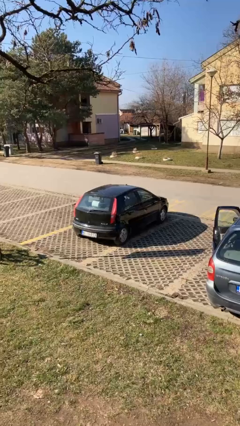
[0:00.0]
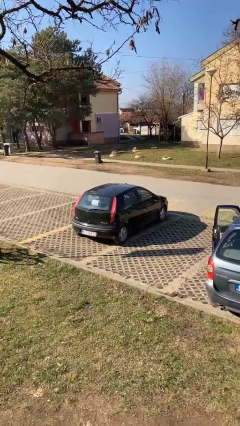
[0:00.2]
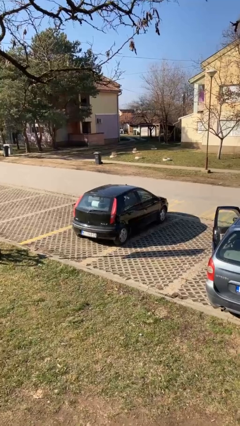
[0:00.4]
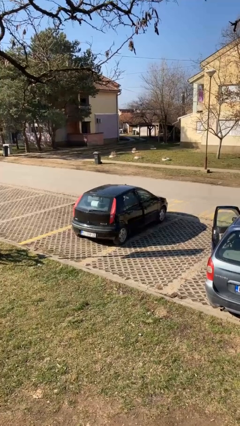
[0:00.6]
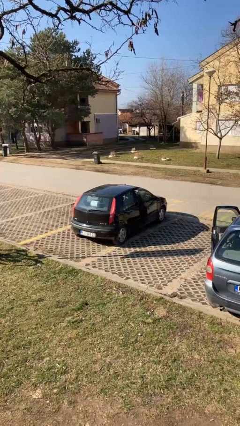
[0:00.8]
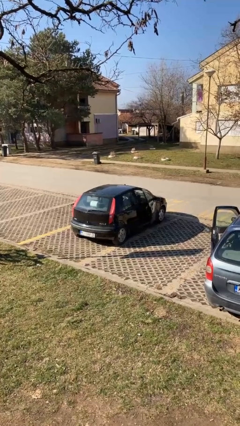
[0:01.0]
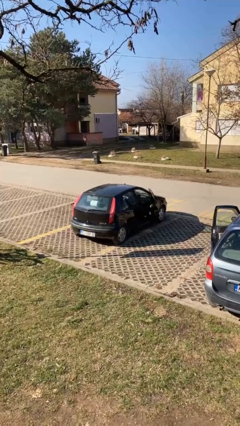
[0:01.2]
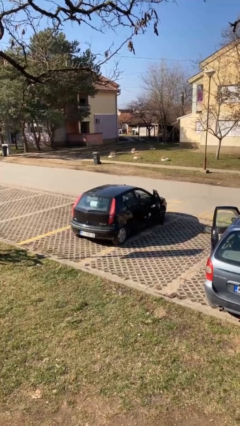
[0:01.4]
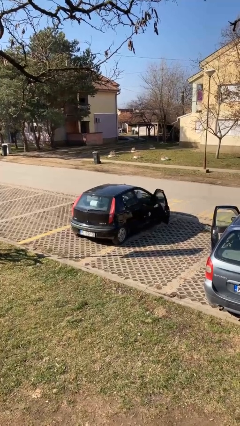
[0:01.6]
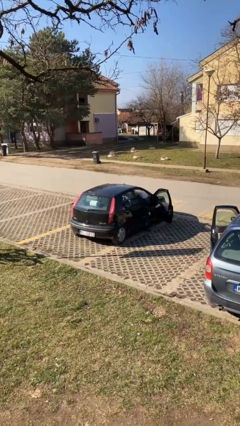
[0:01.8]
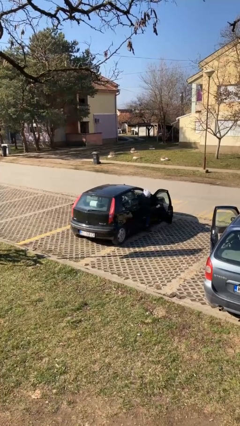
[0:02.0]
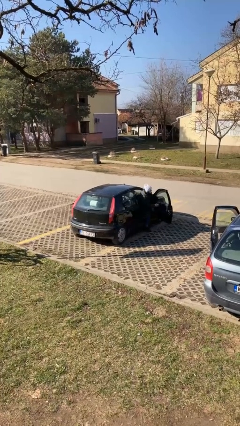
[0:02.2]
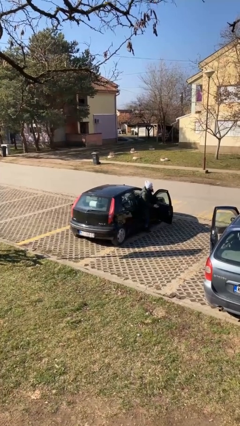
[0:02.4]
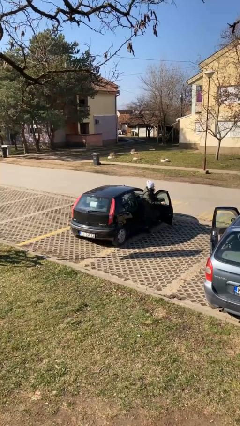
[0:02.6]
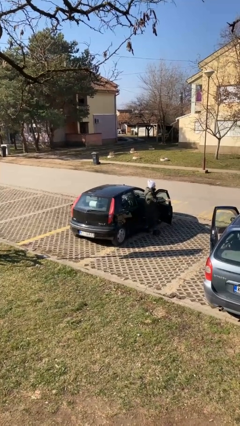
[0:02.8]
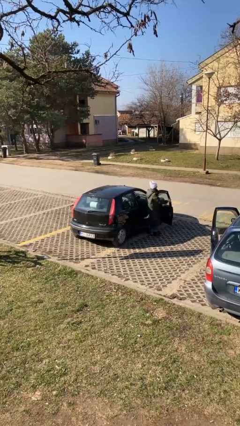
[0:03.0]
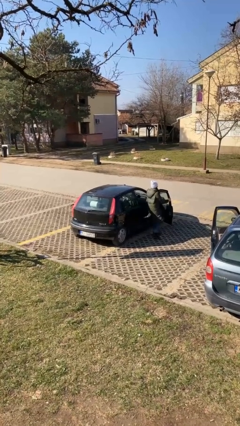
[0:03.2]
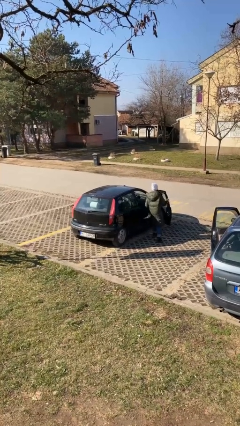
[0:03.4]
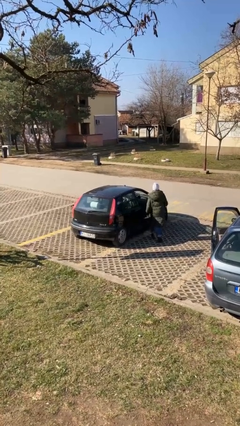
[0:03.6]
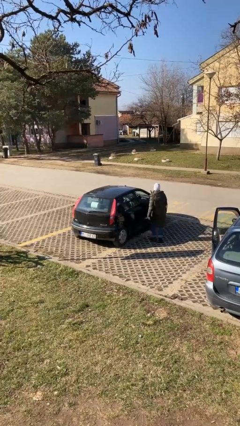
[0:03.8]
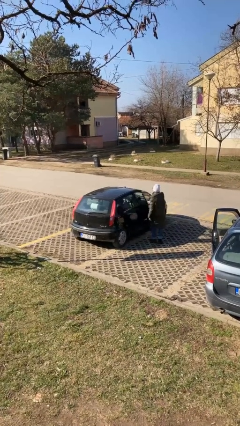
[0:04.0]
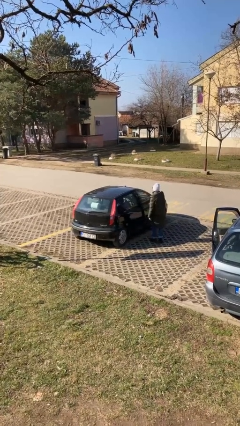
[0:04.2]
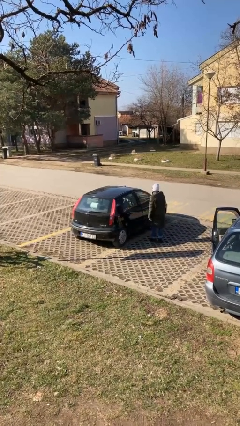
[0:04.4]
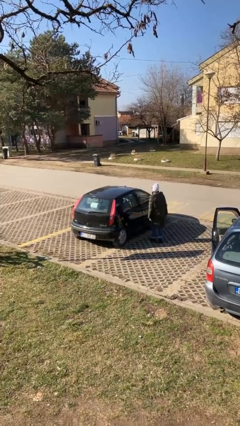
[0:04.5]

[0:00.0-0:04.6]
car drops off person

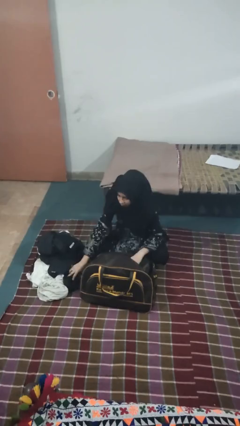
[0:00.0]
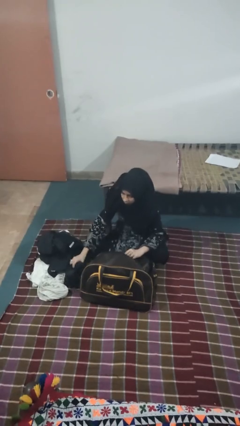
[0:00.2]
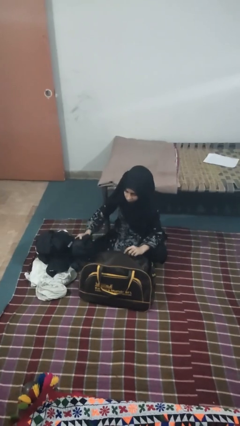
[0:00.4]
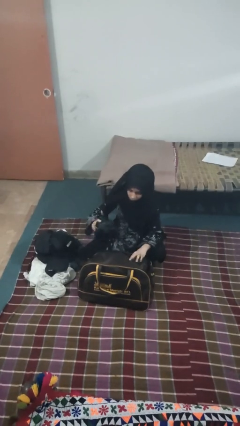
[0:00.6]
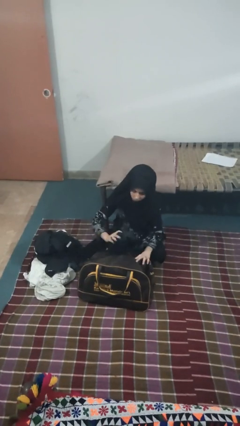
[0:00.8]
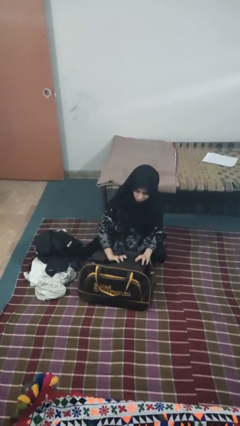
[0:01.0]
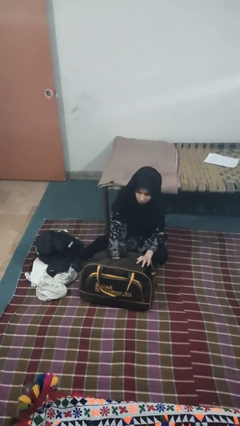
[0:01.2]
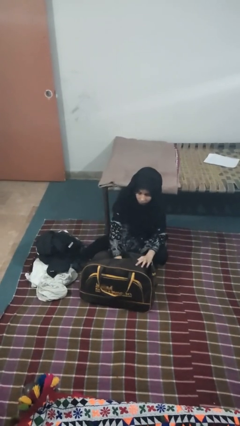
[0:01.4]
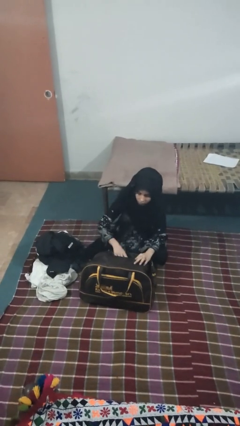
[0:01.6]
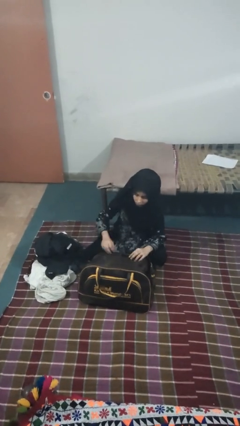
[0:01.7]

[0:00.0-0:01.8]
person loads clothes into suitcase

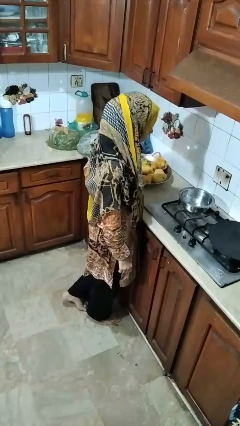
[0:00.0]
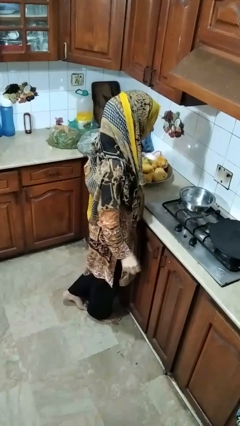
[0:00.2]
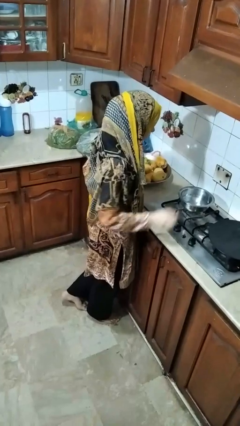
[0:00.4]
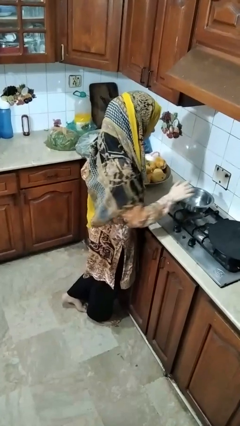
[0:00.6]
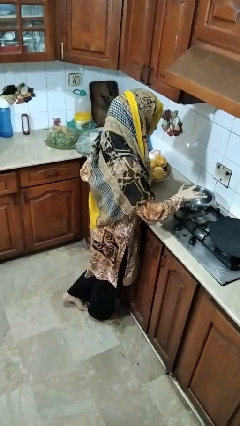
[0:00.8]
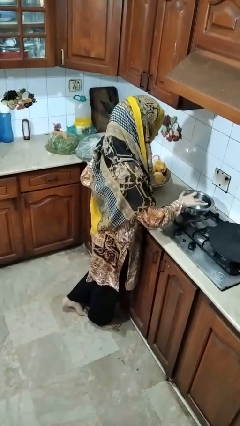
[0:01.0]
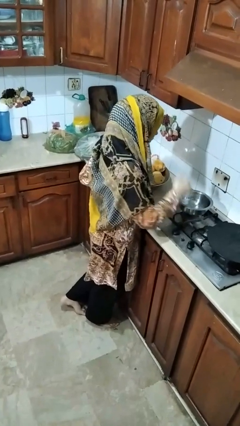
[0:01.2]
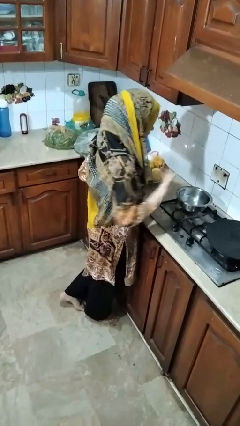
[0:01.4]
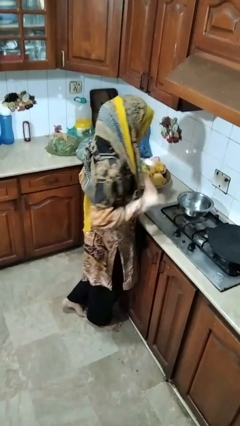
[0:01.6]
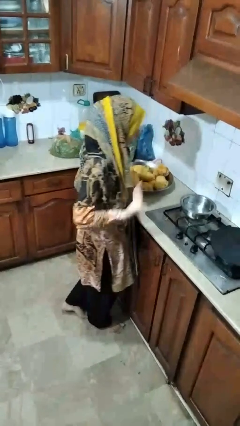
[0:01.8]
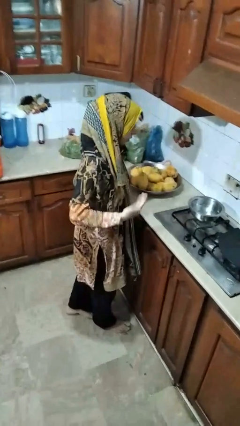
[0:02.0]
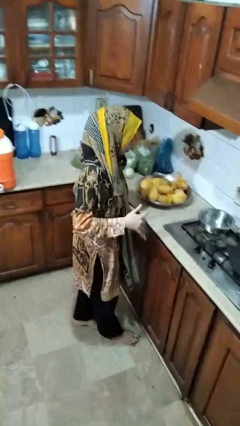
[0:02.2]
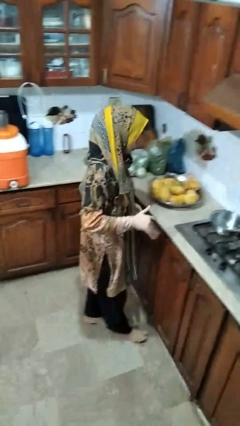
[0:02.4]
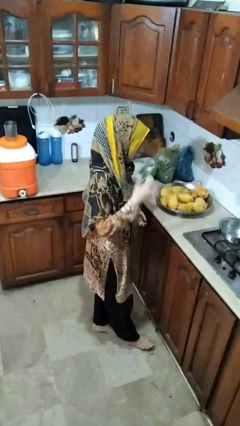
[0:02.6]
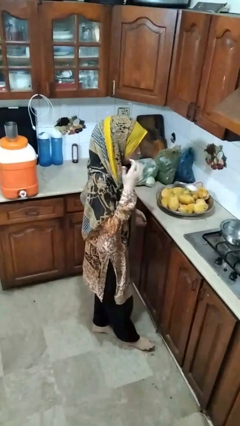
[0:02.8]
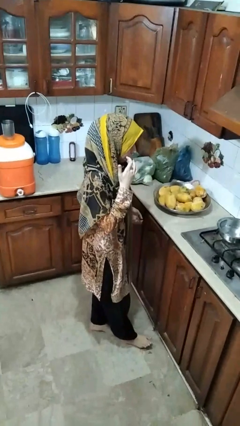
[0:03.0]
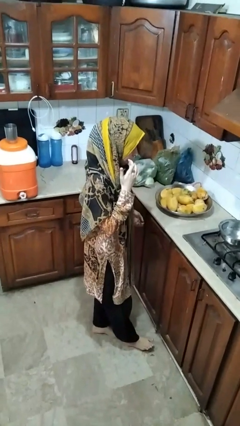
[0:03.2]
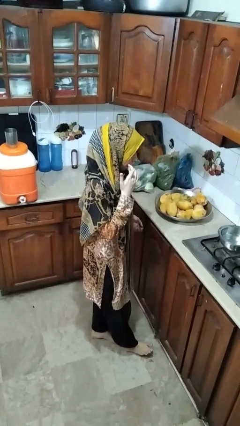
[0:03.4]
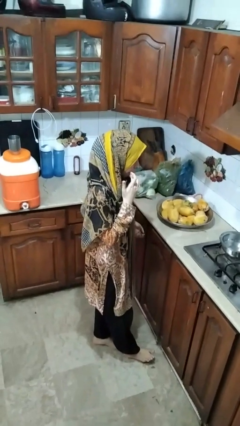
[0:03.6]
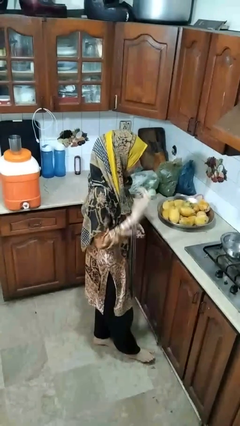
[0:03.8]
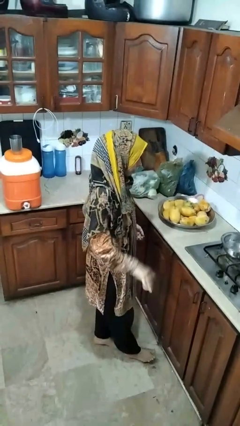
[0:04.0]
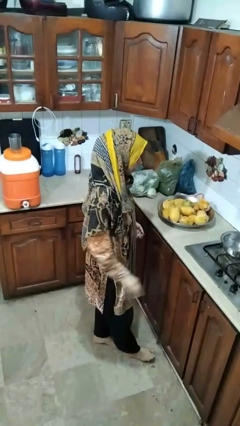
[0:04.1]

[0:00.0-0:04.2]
person burns hand

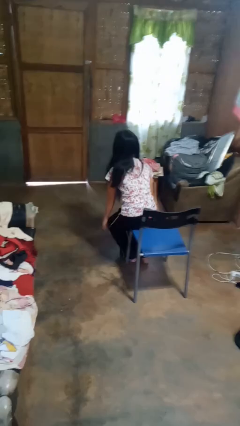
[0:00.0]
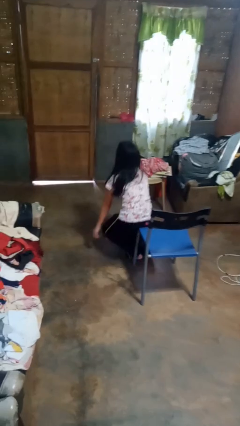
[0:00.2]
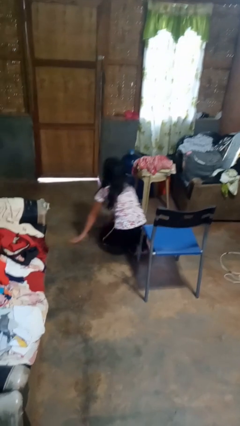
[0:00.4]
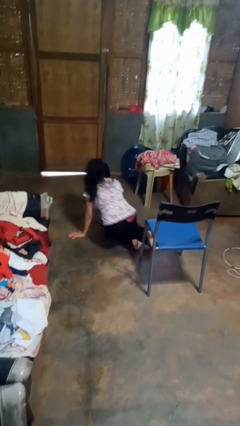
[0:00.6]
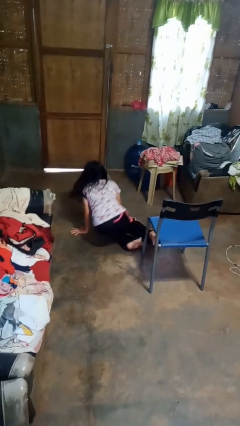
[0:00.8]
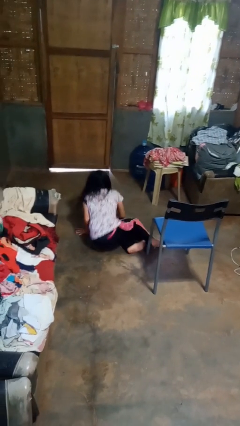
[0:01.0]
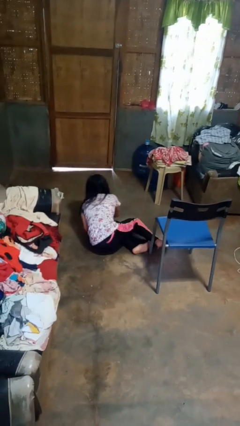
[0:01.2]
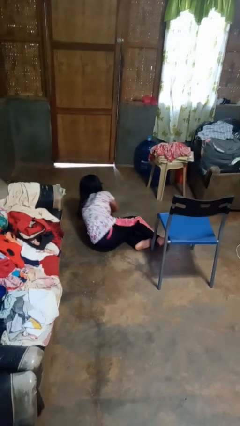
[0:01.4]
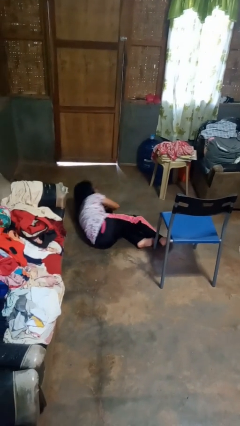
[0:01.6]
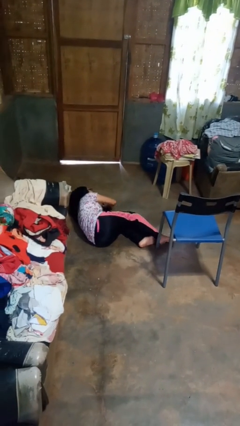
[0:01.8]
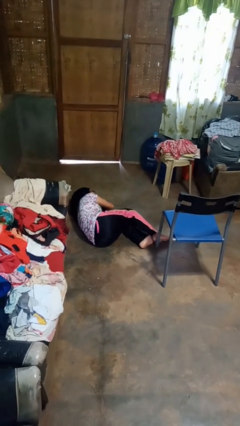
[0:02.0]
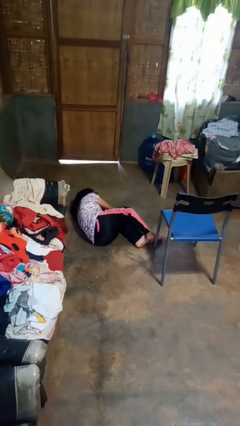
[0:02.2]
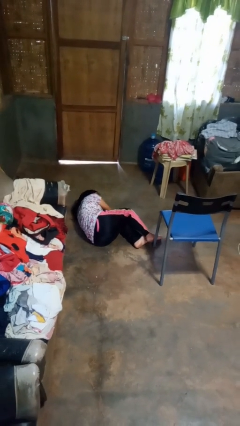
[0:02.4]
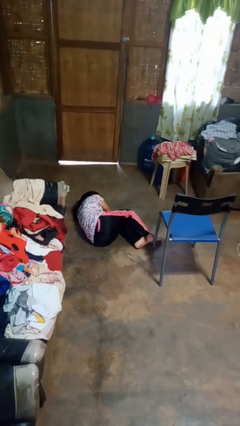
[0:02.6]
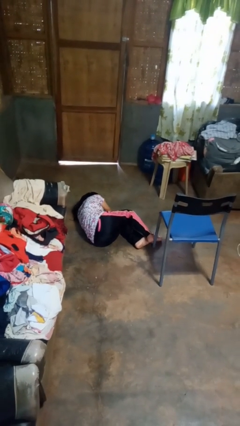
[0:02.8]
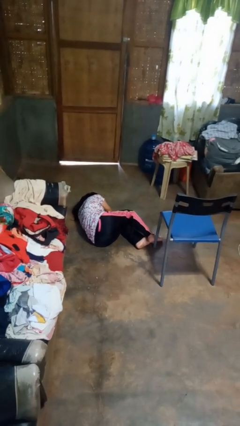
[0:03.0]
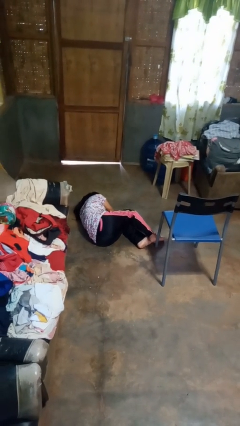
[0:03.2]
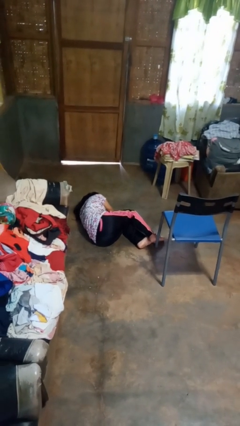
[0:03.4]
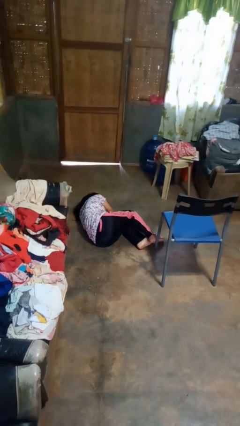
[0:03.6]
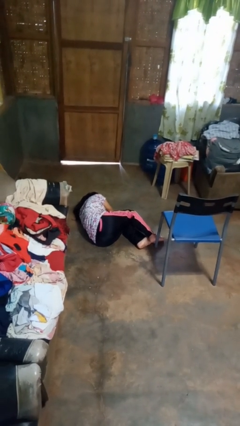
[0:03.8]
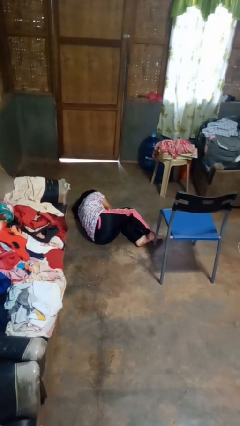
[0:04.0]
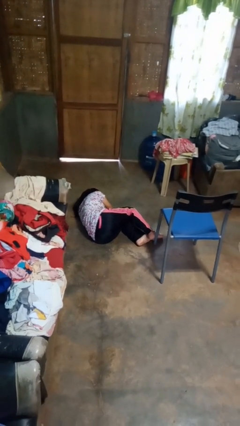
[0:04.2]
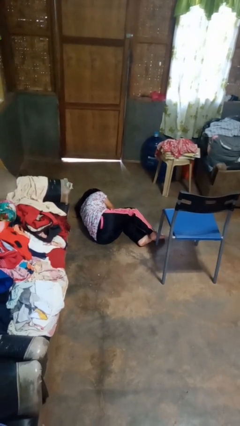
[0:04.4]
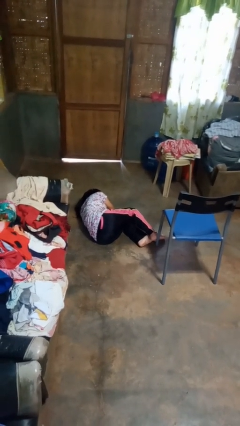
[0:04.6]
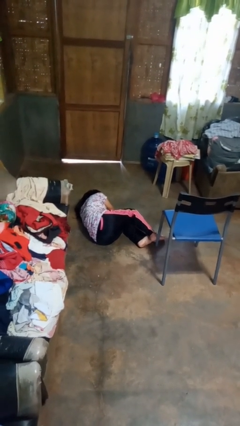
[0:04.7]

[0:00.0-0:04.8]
person falls from chair

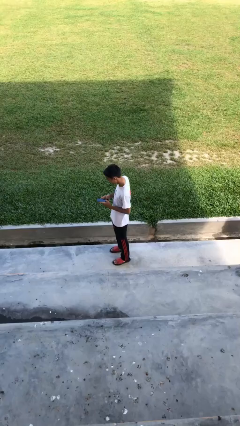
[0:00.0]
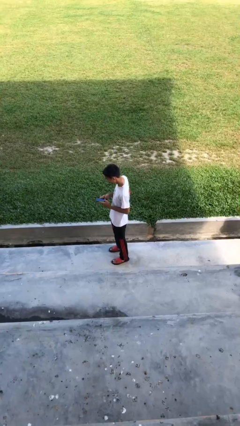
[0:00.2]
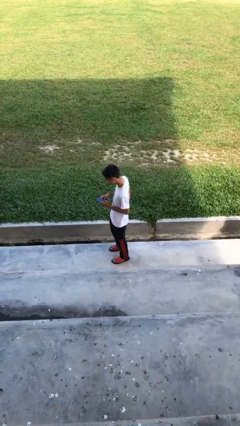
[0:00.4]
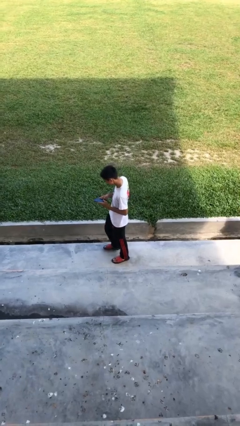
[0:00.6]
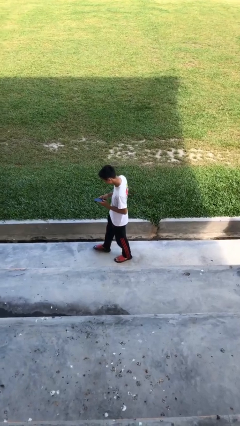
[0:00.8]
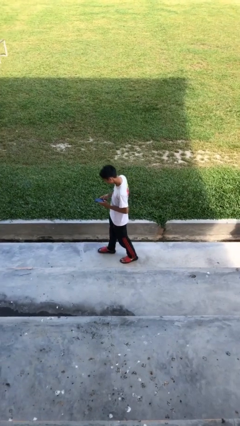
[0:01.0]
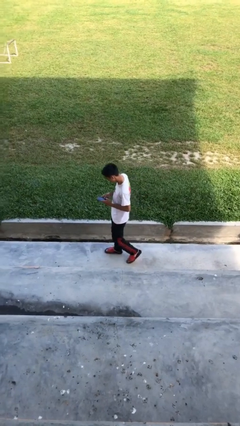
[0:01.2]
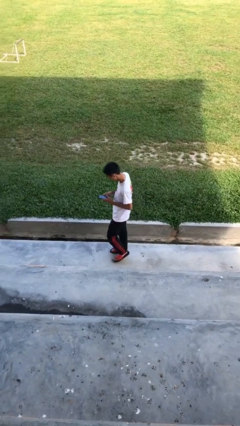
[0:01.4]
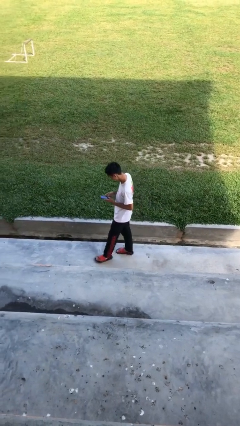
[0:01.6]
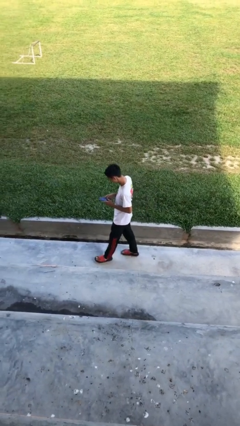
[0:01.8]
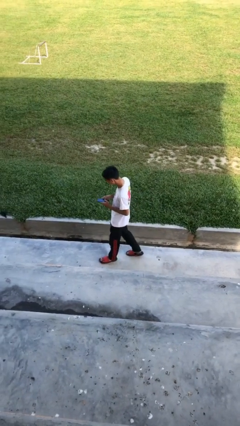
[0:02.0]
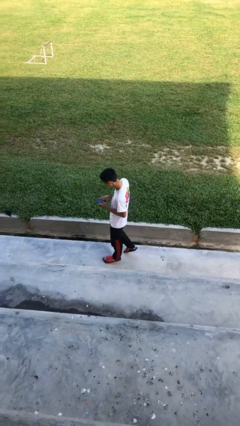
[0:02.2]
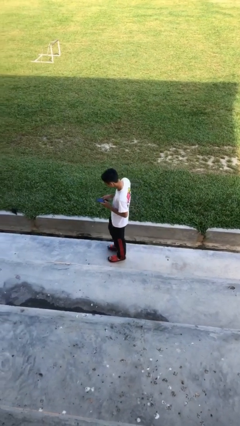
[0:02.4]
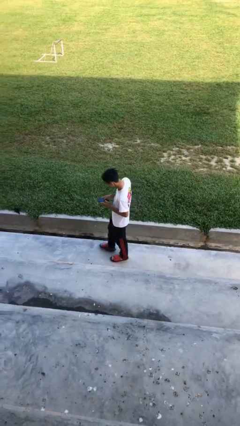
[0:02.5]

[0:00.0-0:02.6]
person texts on phone
